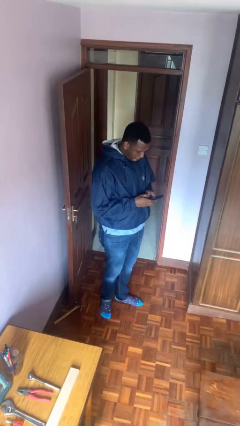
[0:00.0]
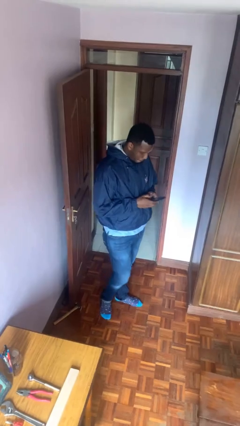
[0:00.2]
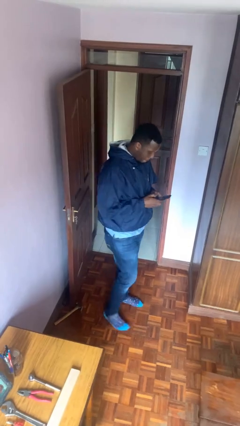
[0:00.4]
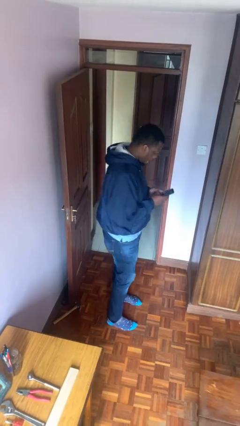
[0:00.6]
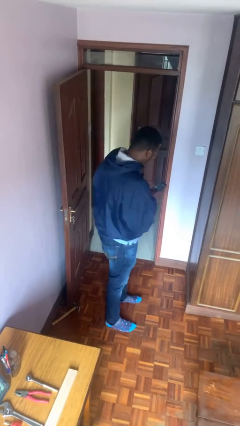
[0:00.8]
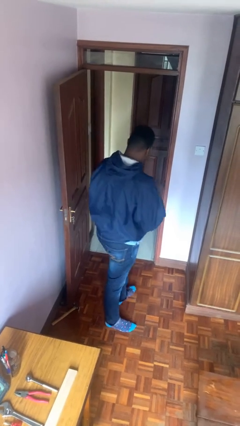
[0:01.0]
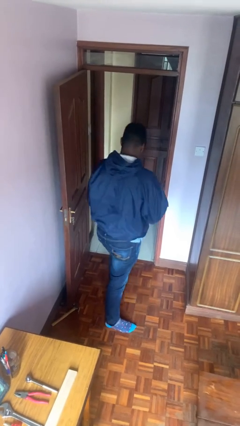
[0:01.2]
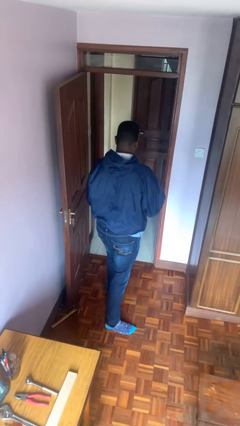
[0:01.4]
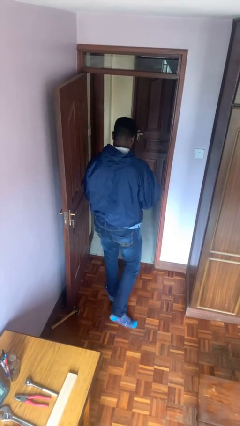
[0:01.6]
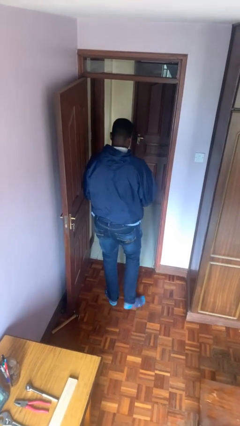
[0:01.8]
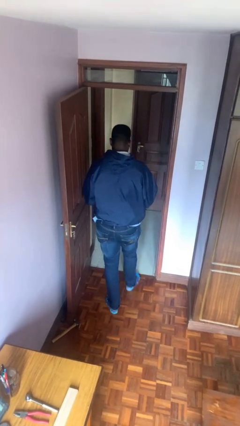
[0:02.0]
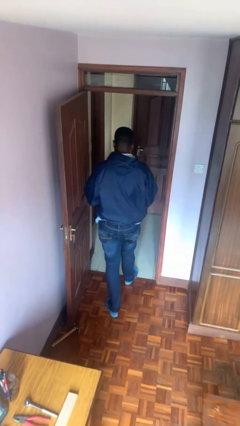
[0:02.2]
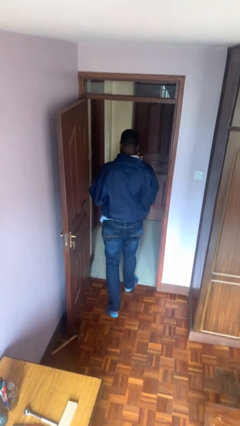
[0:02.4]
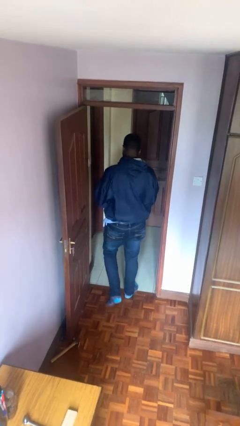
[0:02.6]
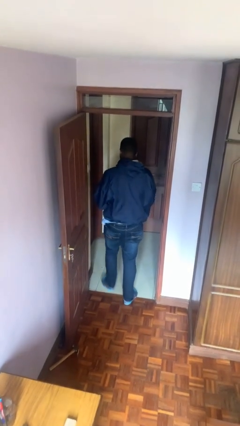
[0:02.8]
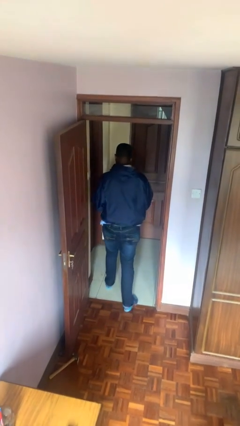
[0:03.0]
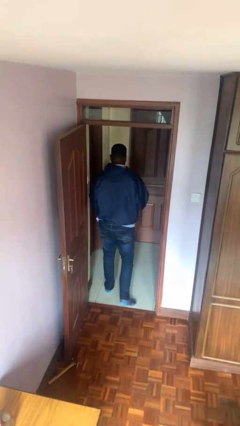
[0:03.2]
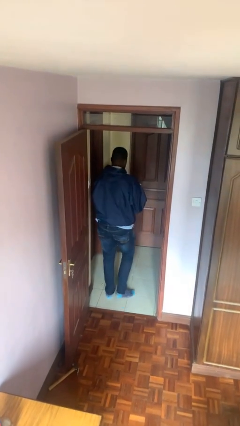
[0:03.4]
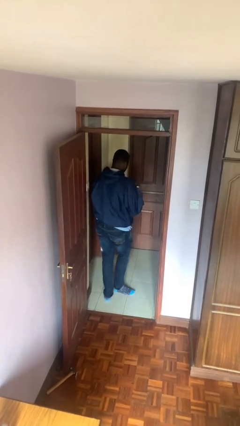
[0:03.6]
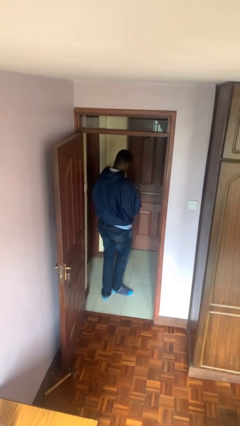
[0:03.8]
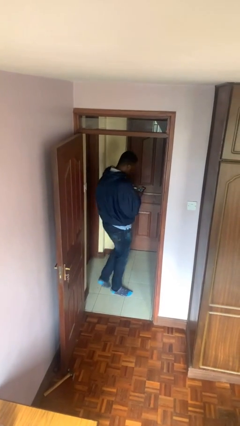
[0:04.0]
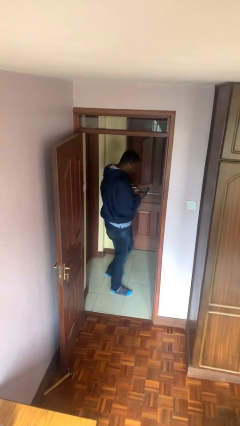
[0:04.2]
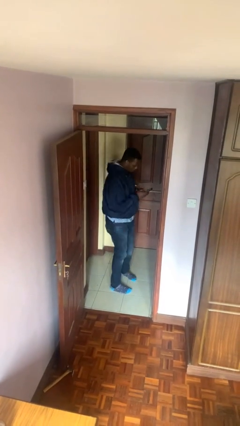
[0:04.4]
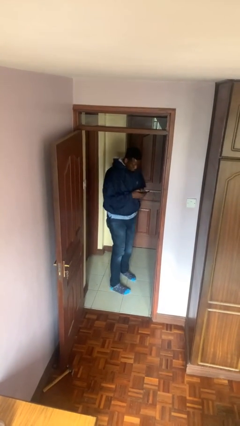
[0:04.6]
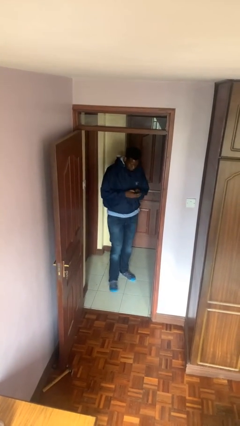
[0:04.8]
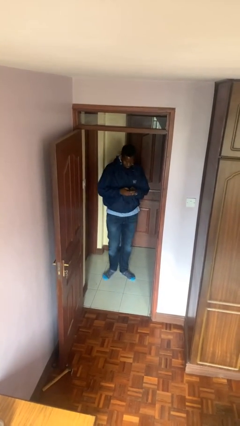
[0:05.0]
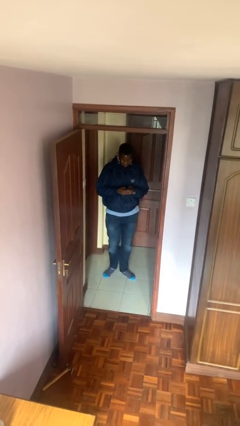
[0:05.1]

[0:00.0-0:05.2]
person exits scene through structure

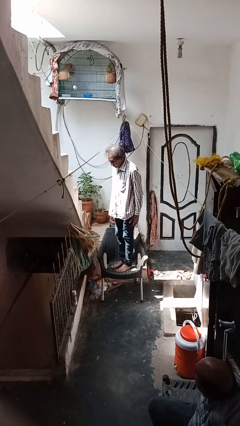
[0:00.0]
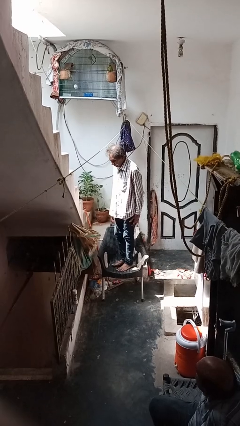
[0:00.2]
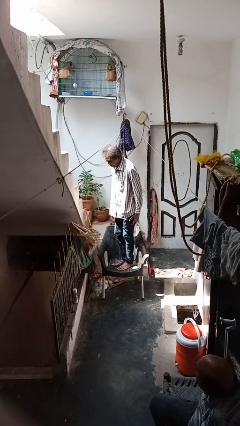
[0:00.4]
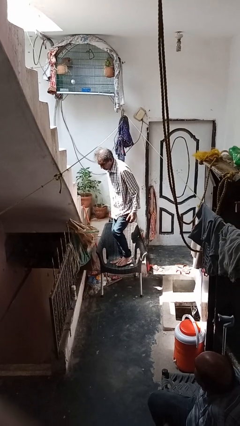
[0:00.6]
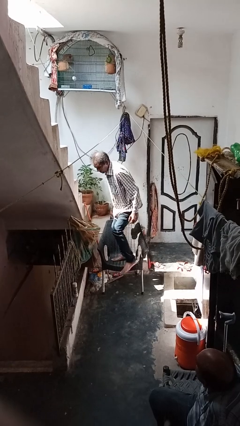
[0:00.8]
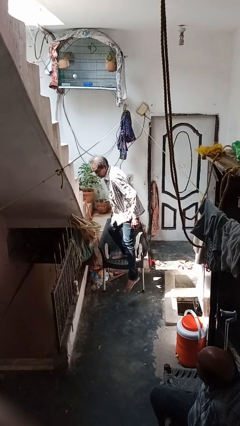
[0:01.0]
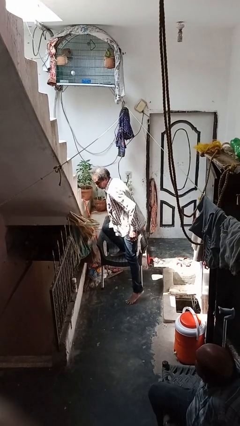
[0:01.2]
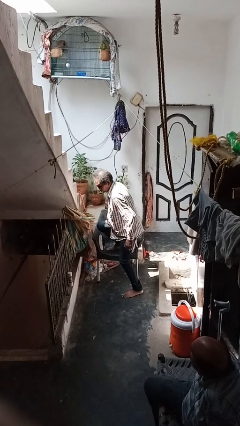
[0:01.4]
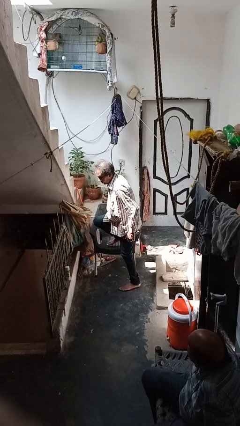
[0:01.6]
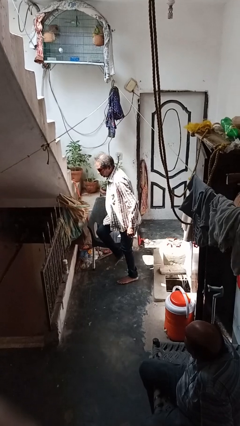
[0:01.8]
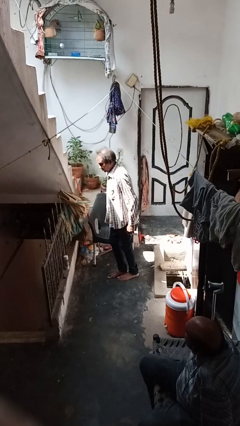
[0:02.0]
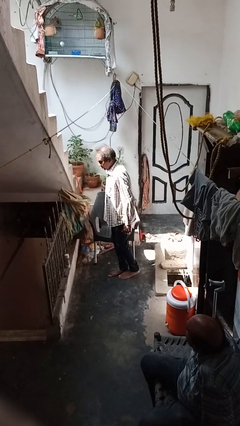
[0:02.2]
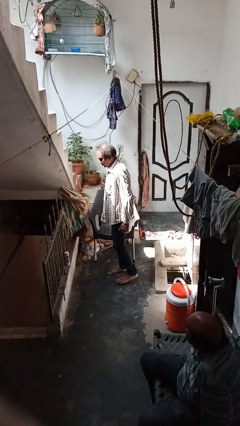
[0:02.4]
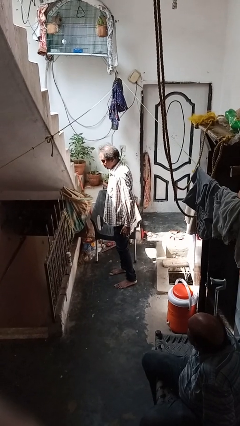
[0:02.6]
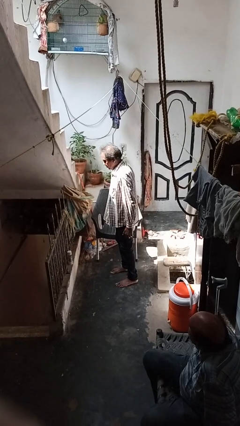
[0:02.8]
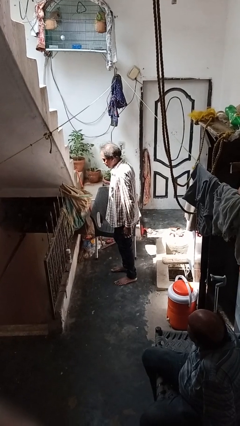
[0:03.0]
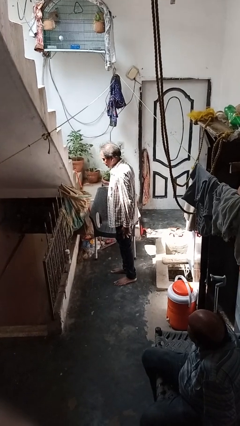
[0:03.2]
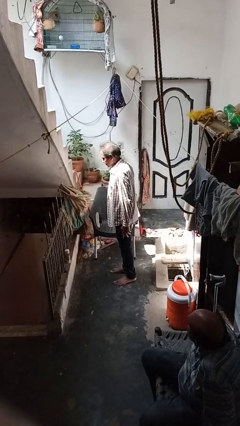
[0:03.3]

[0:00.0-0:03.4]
person climbs off chair

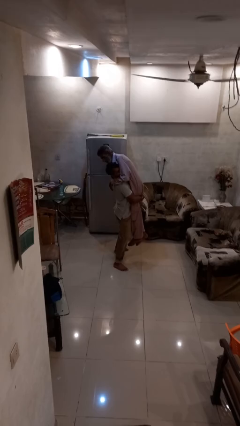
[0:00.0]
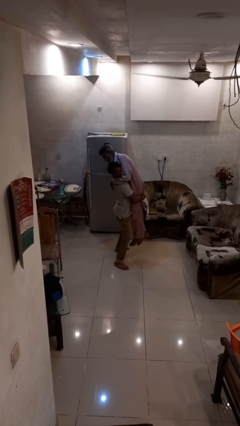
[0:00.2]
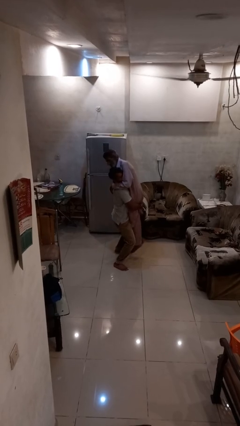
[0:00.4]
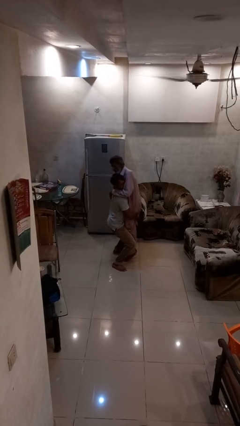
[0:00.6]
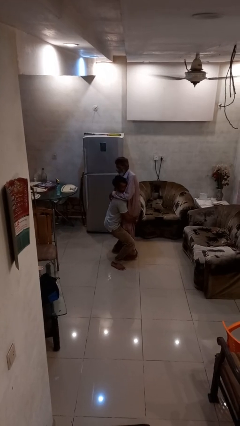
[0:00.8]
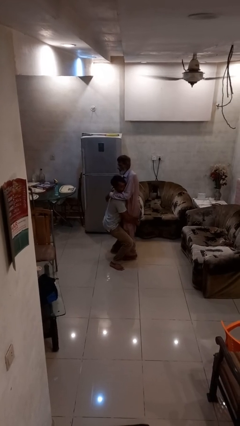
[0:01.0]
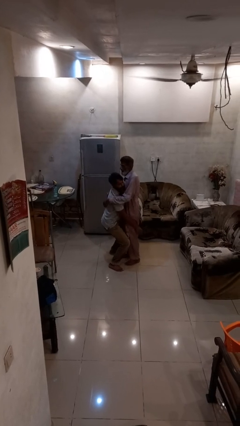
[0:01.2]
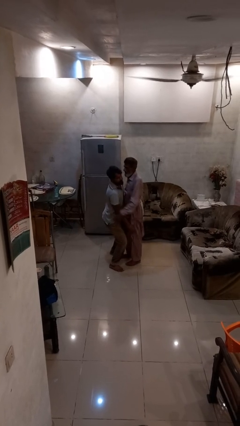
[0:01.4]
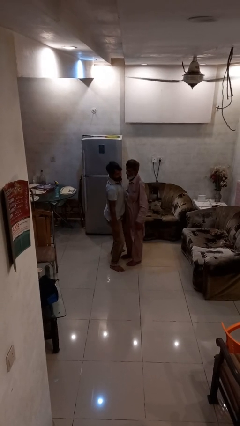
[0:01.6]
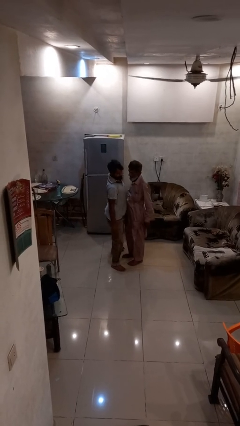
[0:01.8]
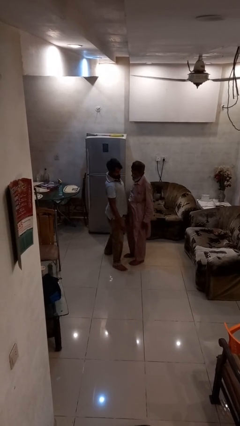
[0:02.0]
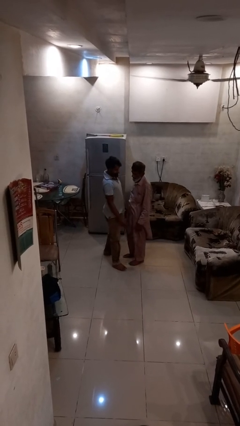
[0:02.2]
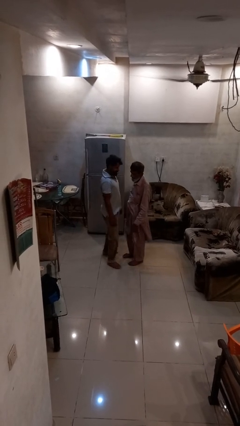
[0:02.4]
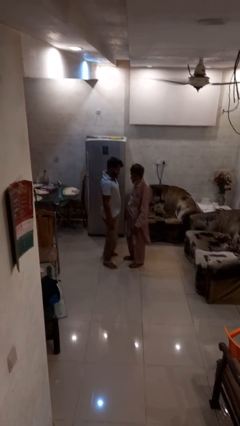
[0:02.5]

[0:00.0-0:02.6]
person puts down person

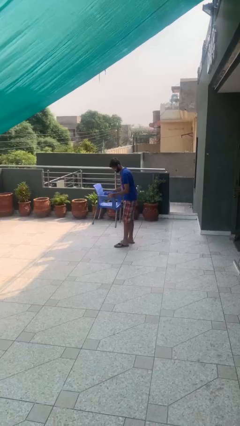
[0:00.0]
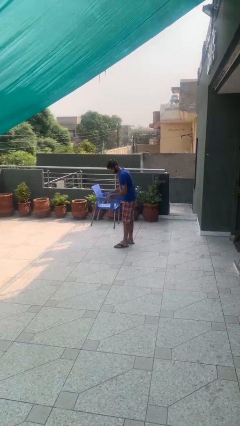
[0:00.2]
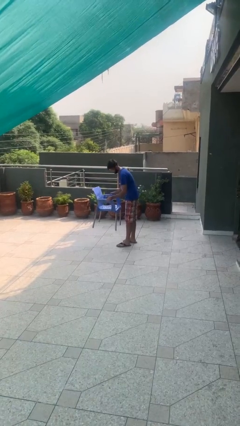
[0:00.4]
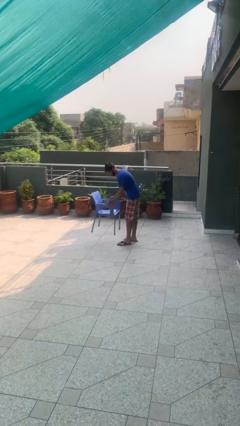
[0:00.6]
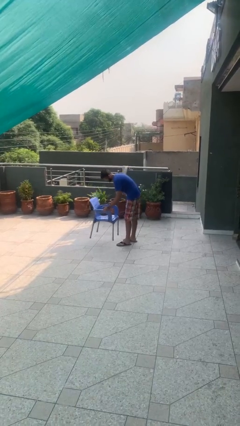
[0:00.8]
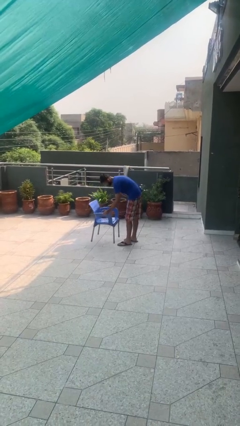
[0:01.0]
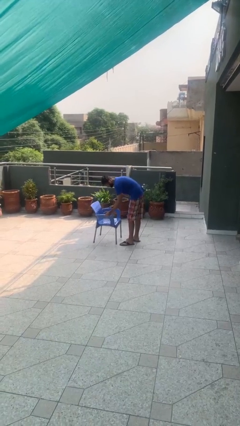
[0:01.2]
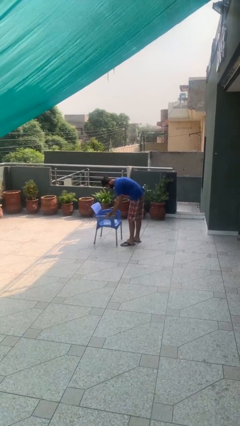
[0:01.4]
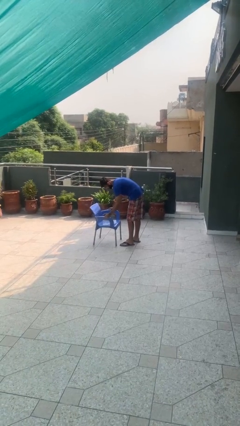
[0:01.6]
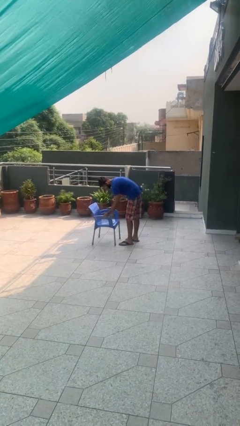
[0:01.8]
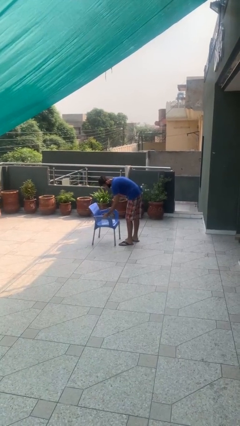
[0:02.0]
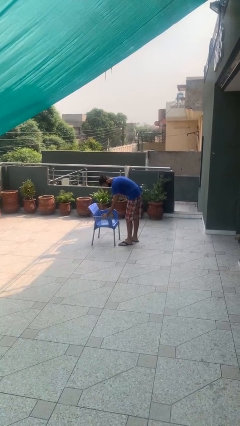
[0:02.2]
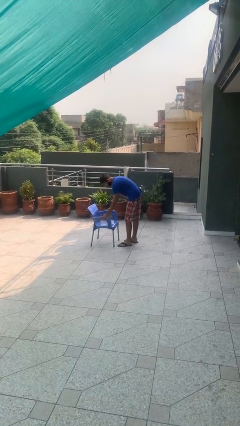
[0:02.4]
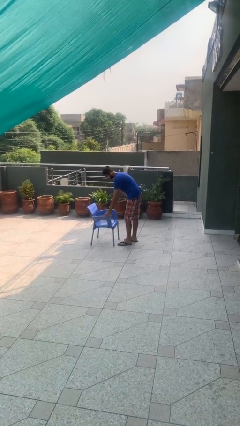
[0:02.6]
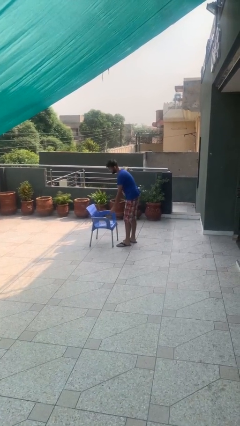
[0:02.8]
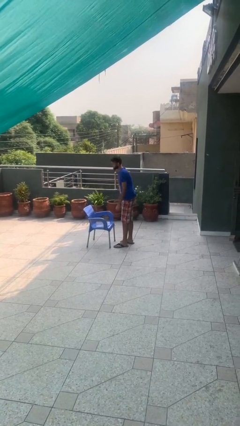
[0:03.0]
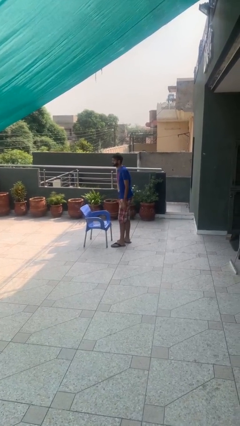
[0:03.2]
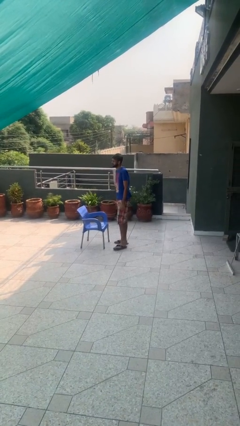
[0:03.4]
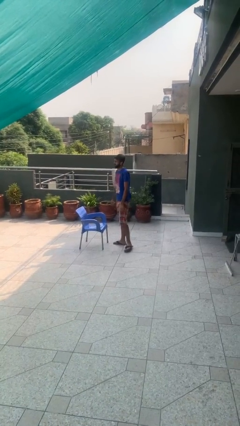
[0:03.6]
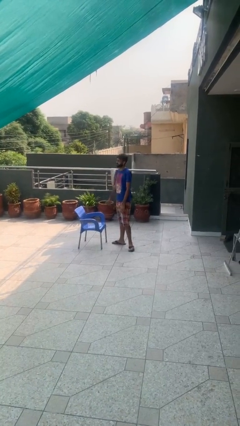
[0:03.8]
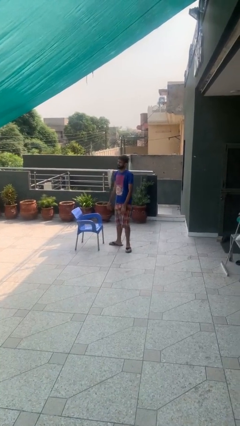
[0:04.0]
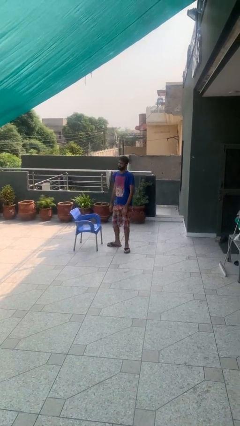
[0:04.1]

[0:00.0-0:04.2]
person puts down object on floor

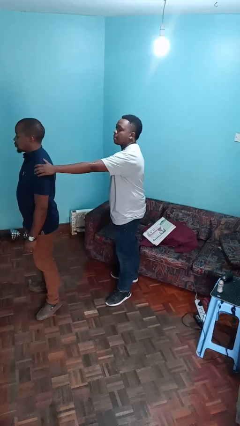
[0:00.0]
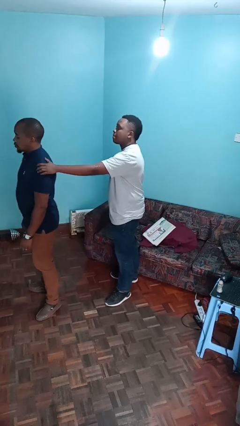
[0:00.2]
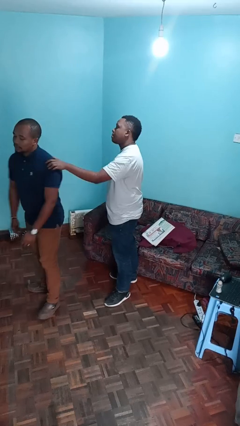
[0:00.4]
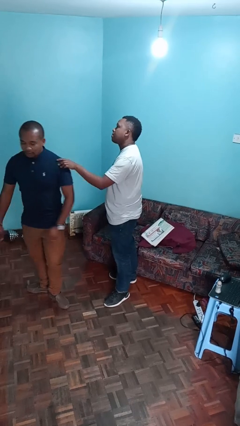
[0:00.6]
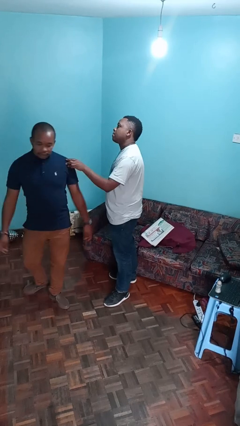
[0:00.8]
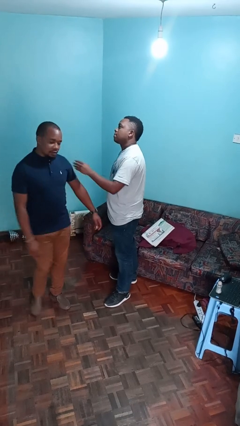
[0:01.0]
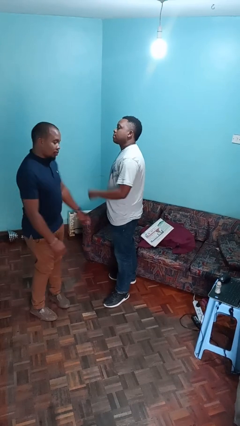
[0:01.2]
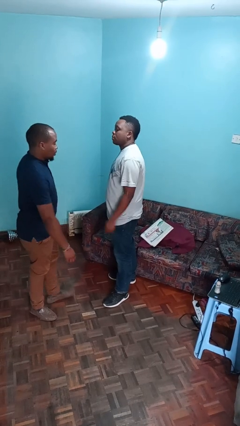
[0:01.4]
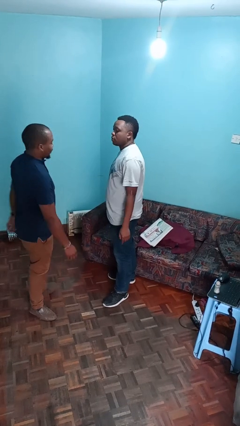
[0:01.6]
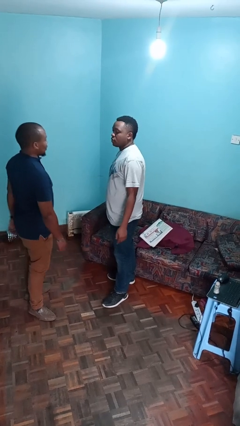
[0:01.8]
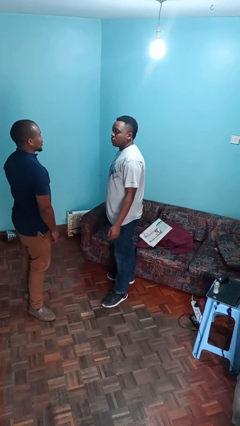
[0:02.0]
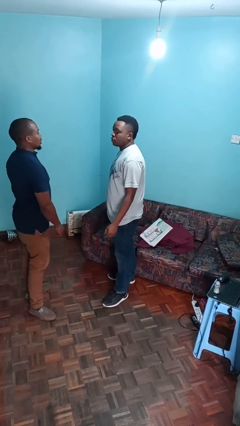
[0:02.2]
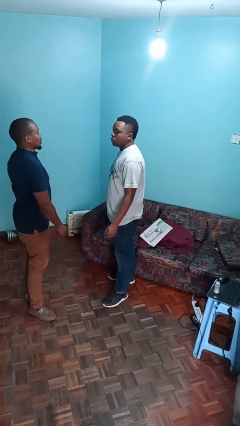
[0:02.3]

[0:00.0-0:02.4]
person spins person around
